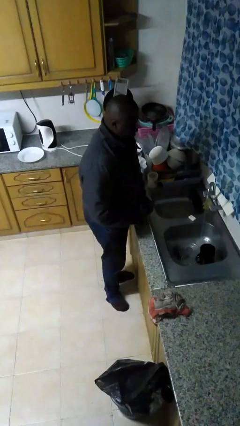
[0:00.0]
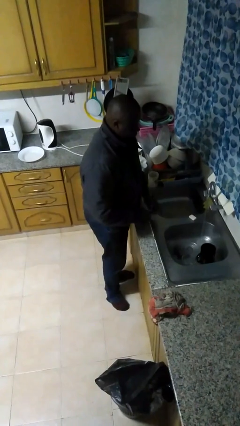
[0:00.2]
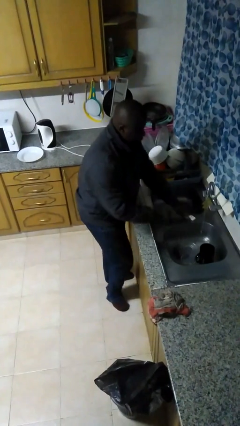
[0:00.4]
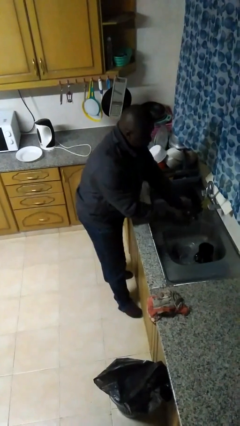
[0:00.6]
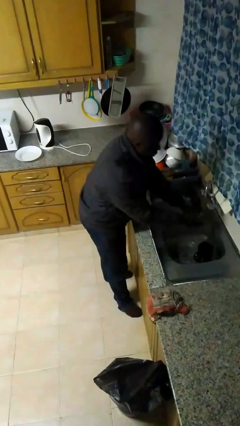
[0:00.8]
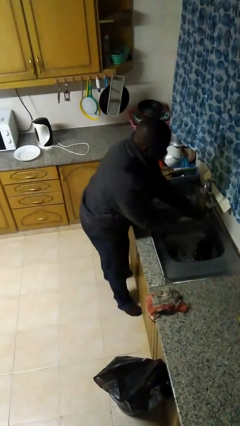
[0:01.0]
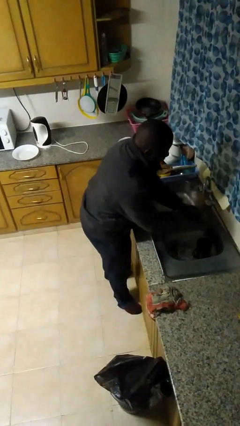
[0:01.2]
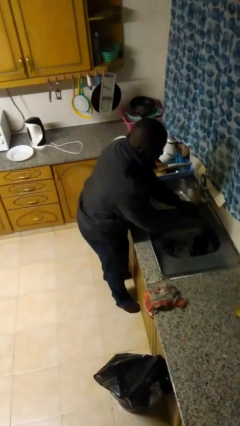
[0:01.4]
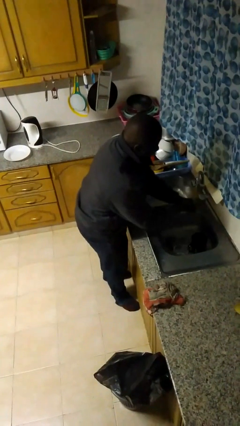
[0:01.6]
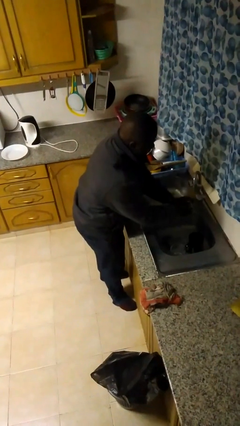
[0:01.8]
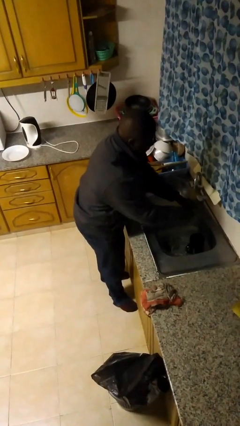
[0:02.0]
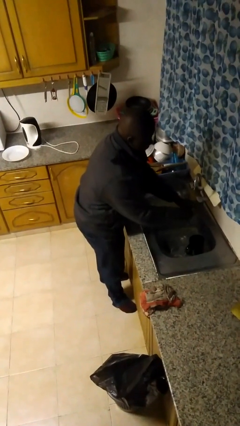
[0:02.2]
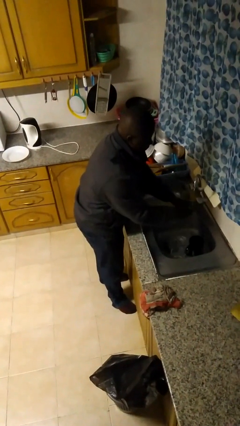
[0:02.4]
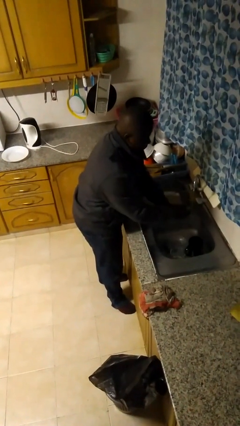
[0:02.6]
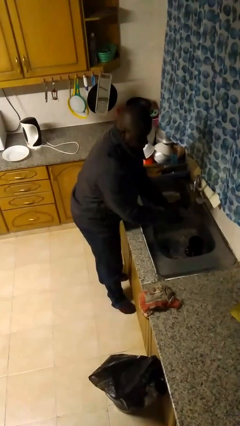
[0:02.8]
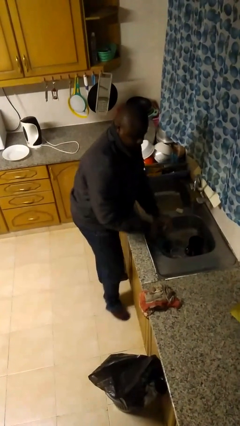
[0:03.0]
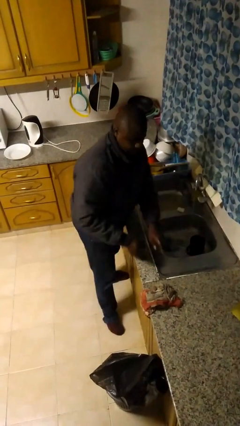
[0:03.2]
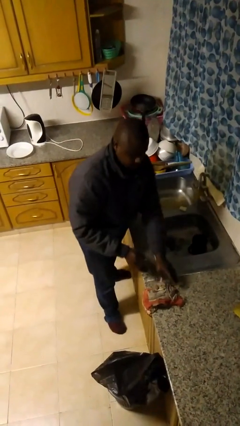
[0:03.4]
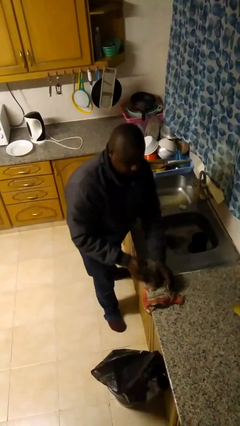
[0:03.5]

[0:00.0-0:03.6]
person washes hands

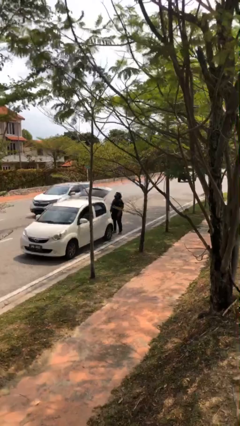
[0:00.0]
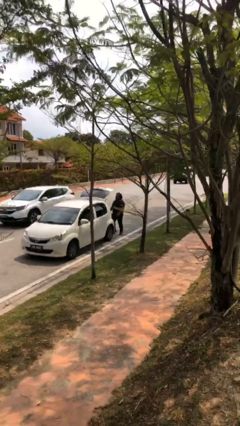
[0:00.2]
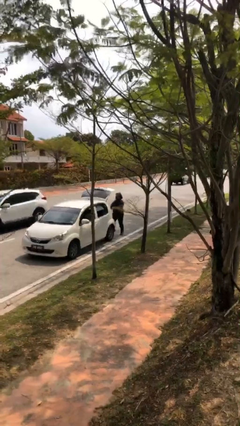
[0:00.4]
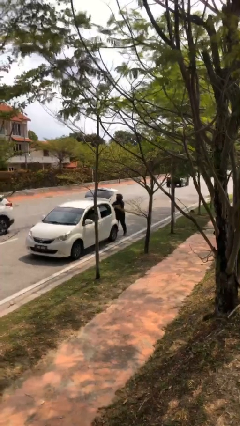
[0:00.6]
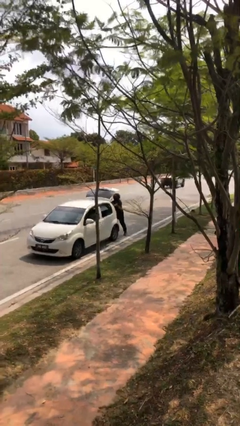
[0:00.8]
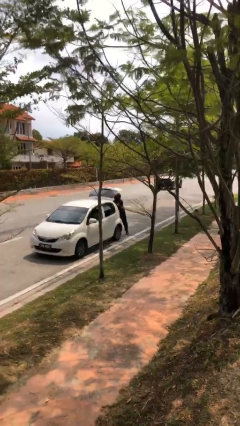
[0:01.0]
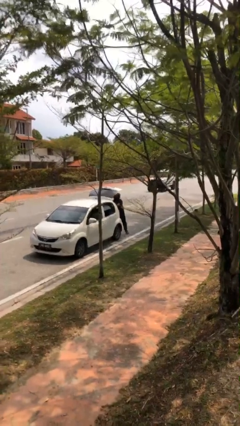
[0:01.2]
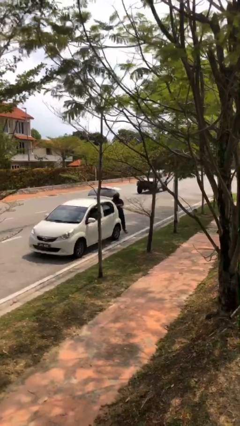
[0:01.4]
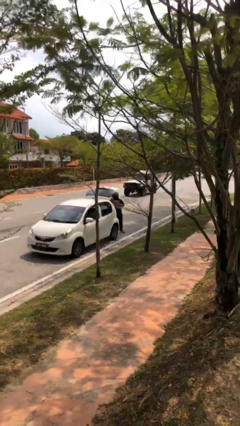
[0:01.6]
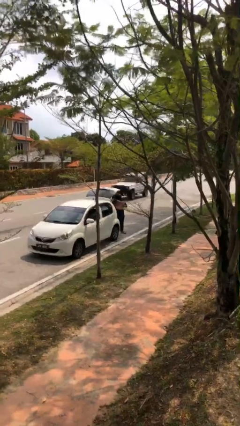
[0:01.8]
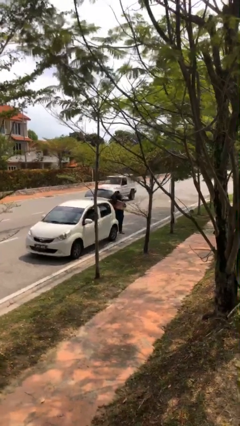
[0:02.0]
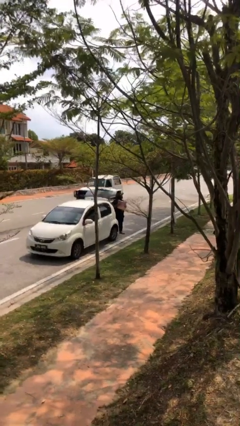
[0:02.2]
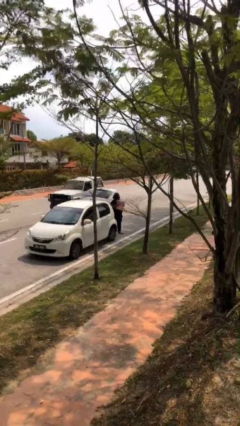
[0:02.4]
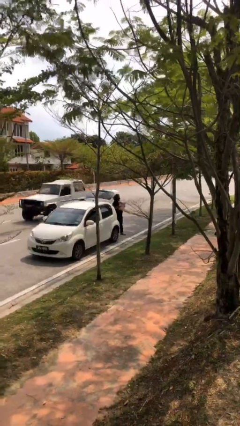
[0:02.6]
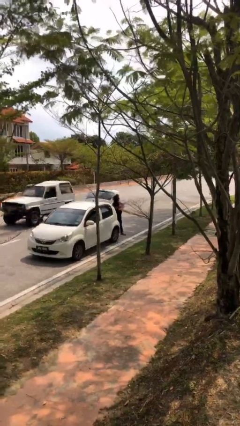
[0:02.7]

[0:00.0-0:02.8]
person unloads car

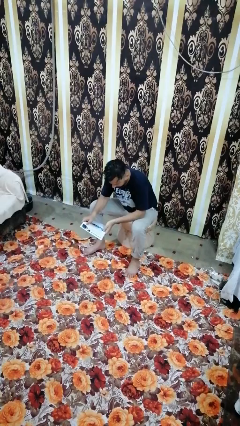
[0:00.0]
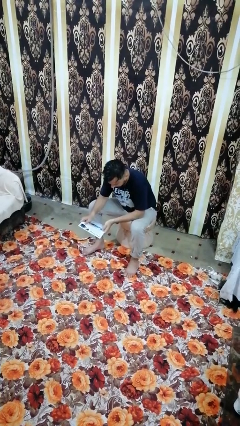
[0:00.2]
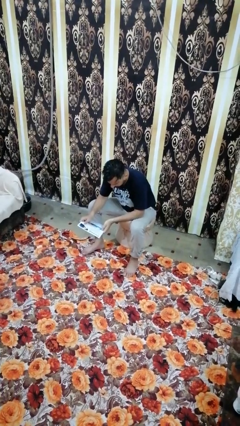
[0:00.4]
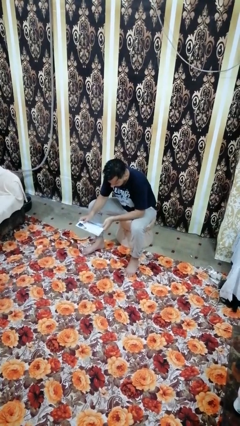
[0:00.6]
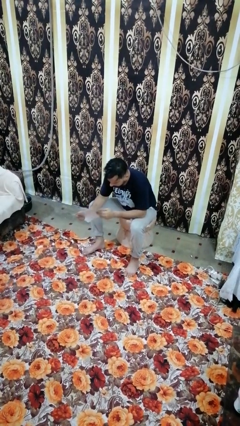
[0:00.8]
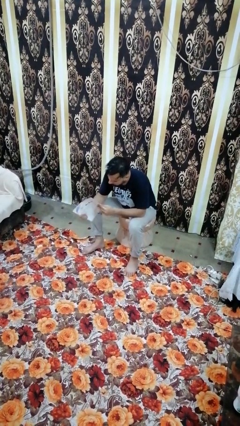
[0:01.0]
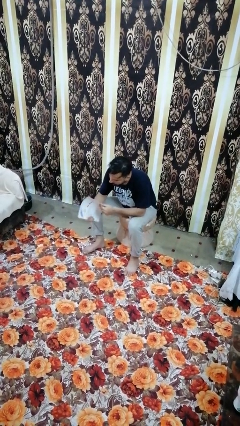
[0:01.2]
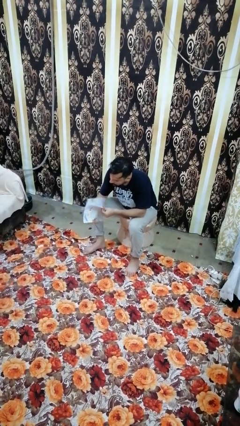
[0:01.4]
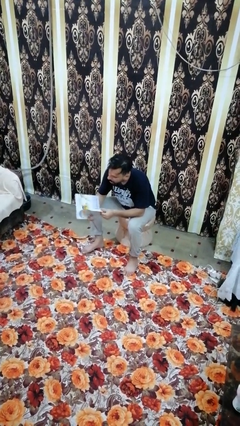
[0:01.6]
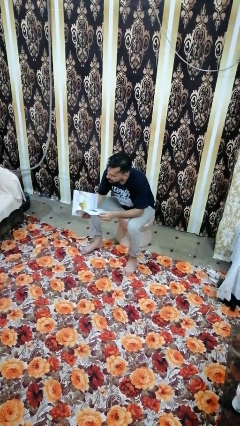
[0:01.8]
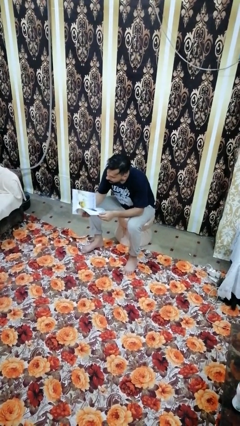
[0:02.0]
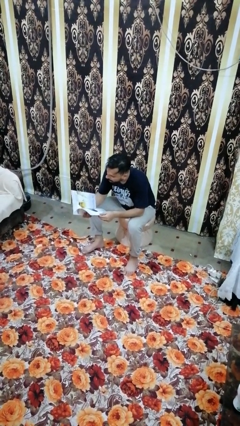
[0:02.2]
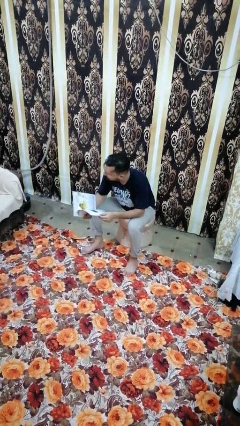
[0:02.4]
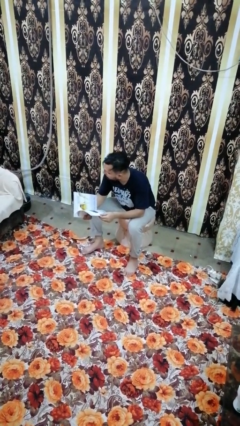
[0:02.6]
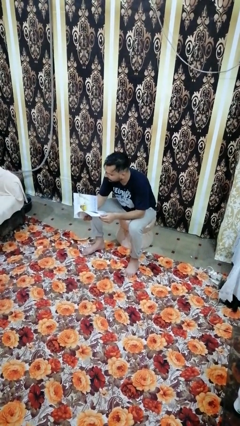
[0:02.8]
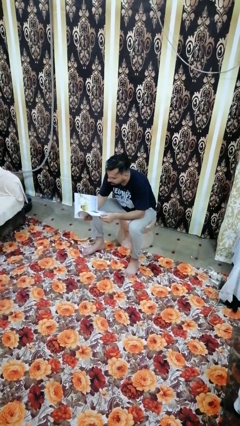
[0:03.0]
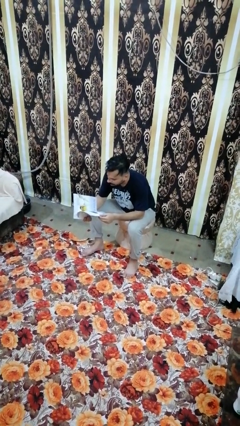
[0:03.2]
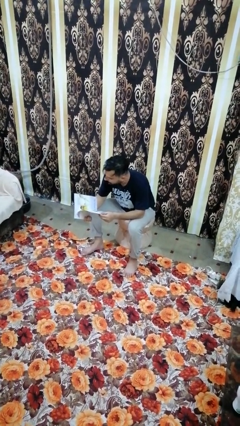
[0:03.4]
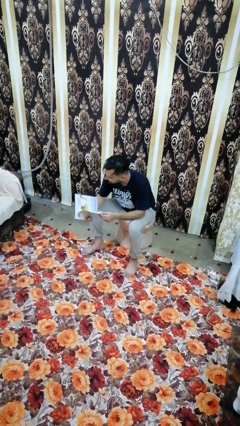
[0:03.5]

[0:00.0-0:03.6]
person reads magazine

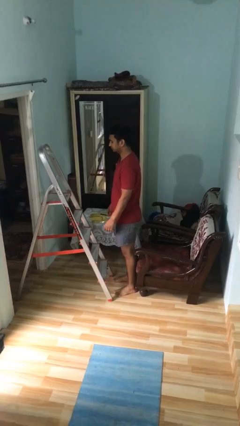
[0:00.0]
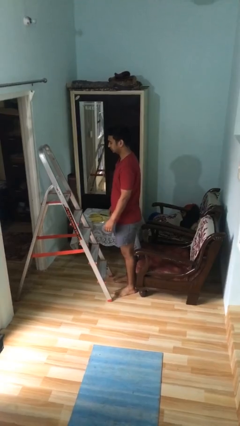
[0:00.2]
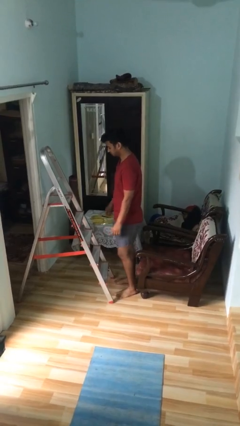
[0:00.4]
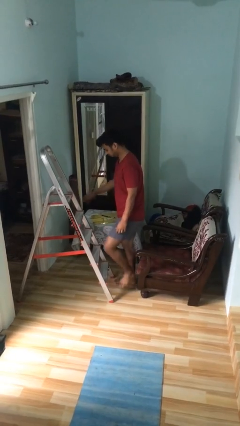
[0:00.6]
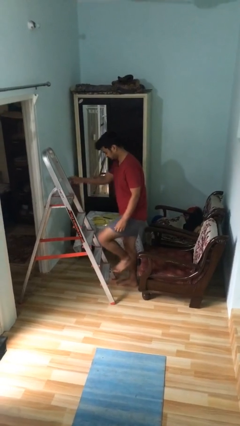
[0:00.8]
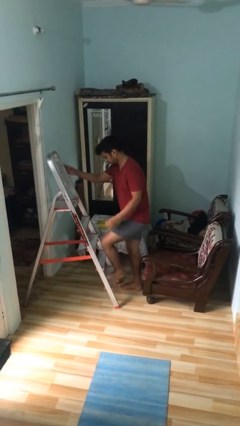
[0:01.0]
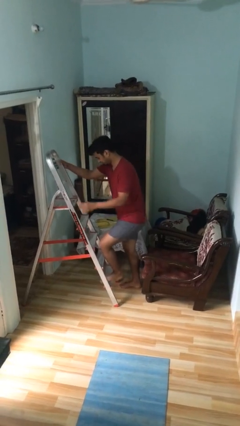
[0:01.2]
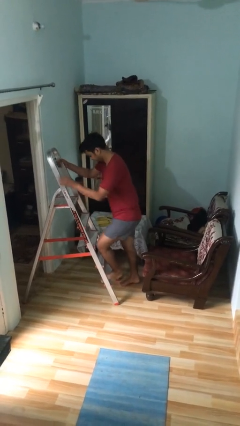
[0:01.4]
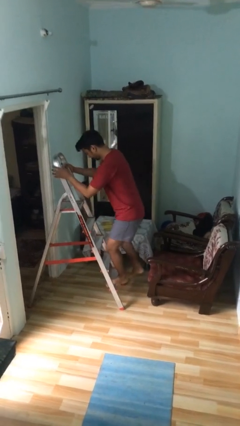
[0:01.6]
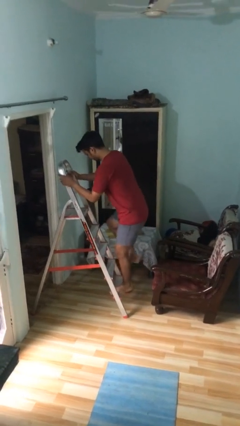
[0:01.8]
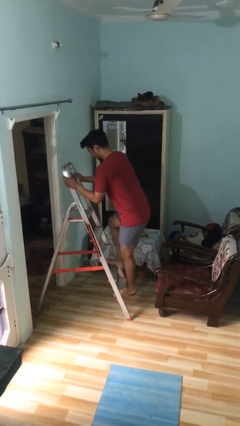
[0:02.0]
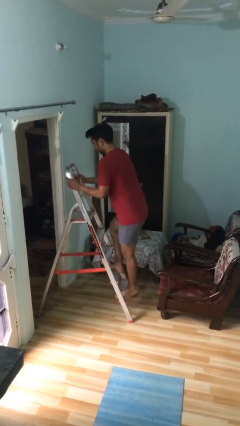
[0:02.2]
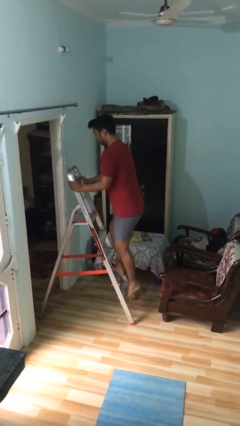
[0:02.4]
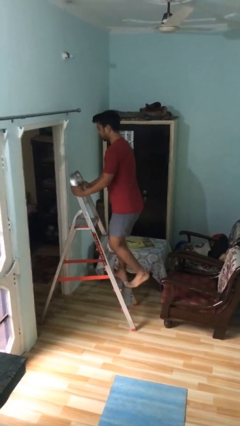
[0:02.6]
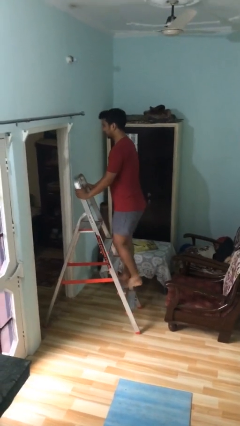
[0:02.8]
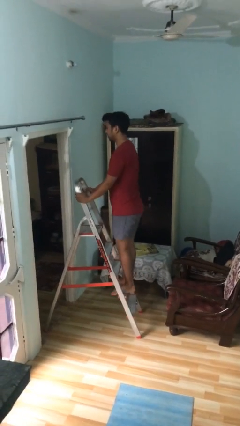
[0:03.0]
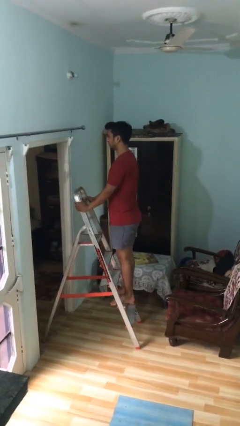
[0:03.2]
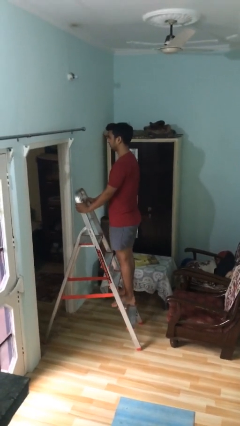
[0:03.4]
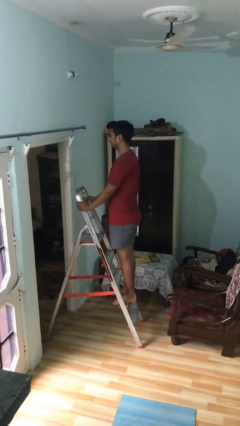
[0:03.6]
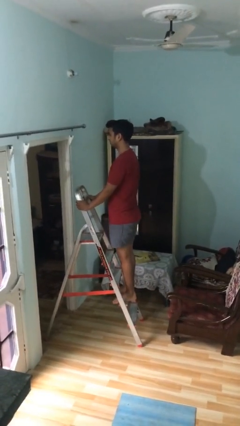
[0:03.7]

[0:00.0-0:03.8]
person climbs up ladder

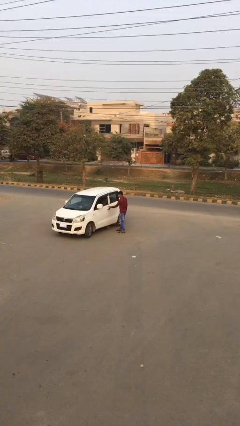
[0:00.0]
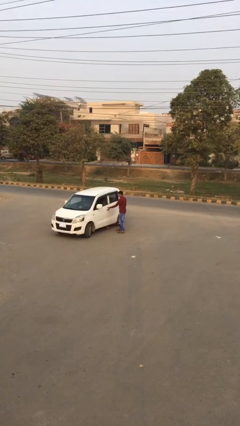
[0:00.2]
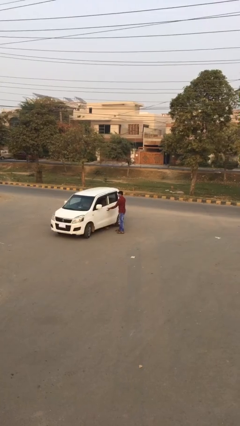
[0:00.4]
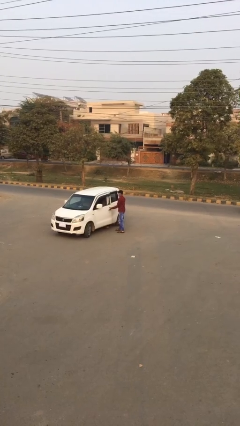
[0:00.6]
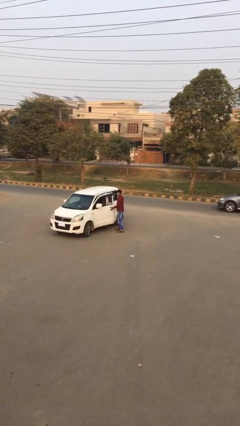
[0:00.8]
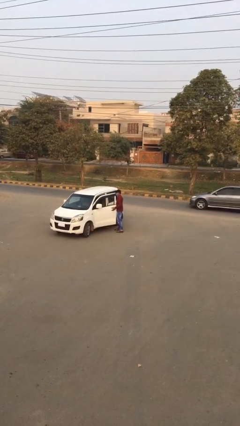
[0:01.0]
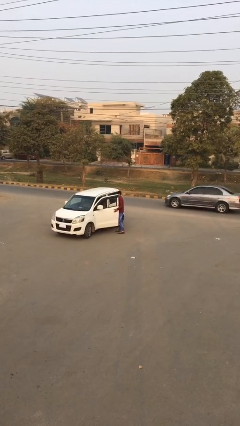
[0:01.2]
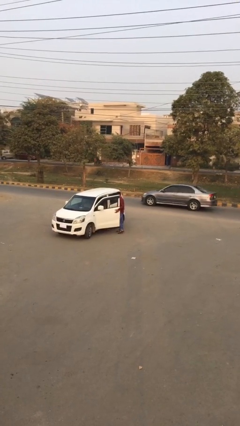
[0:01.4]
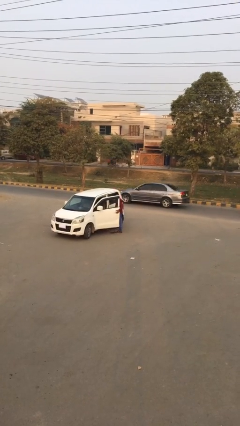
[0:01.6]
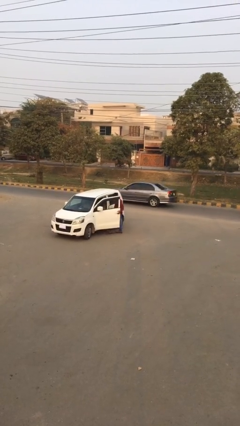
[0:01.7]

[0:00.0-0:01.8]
person opens car door

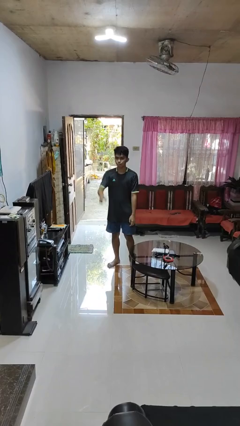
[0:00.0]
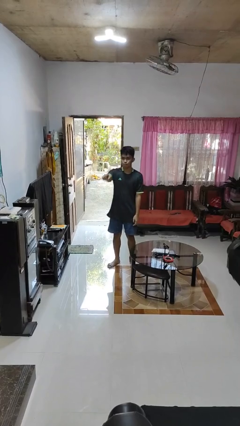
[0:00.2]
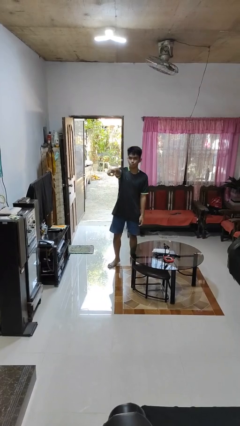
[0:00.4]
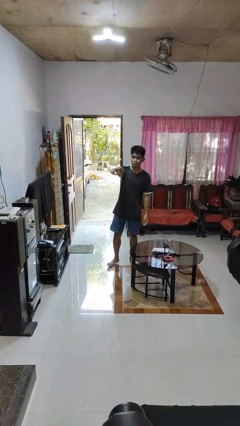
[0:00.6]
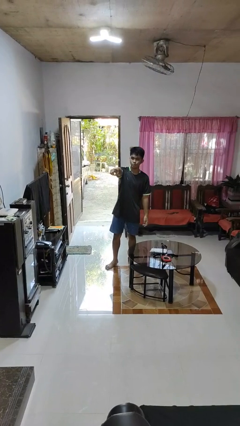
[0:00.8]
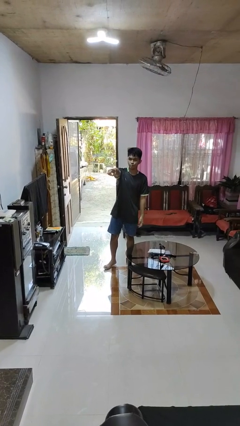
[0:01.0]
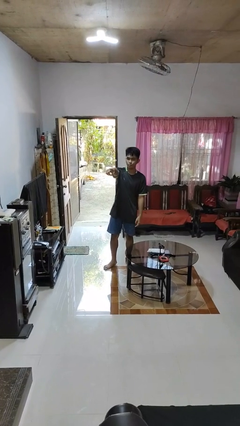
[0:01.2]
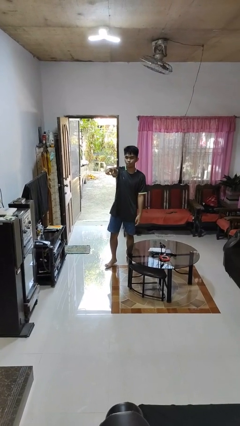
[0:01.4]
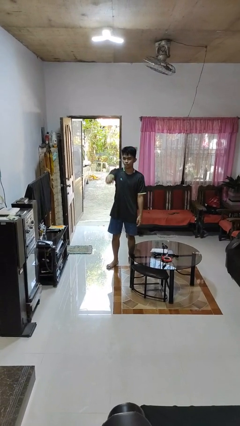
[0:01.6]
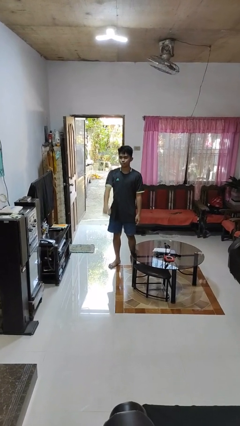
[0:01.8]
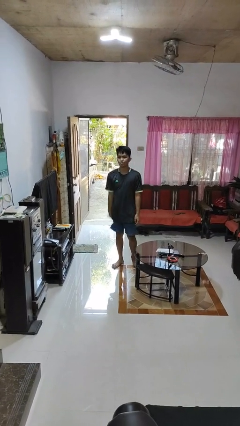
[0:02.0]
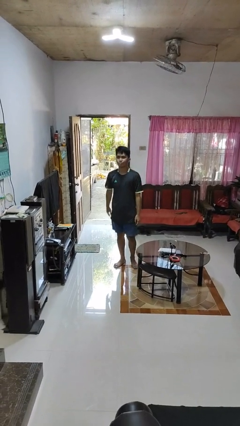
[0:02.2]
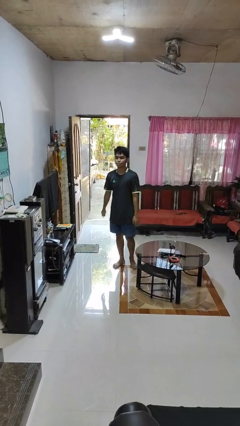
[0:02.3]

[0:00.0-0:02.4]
person points at person
